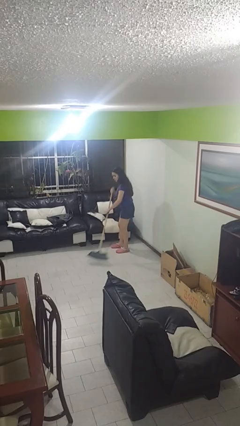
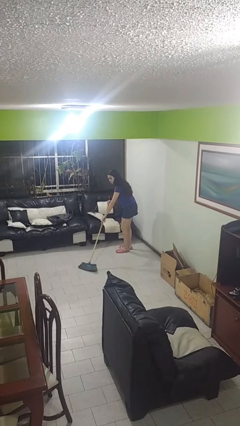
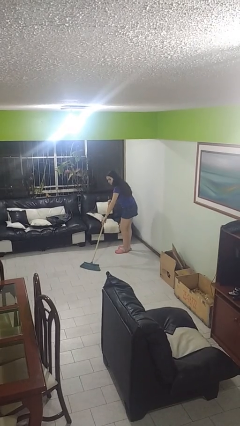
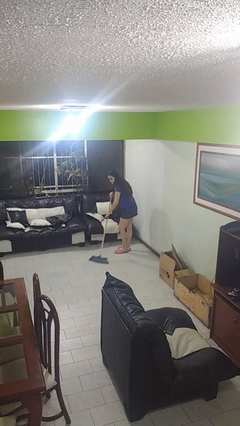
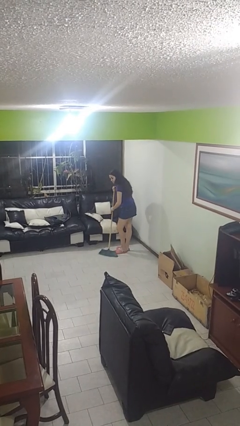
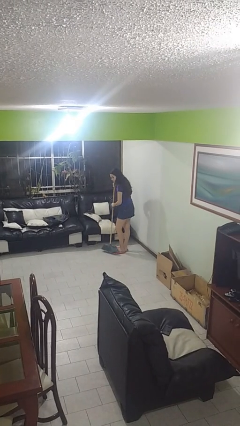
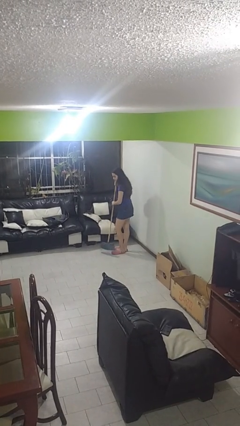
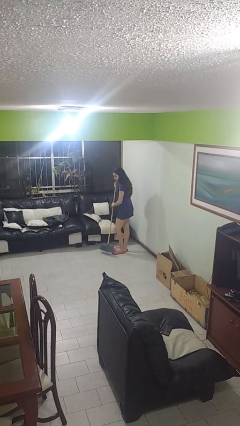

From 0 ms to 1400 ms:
person sweeps floor

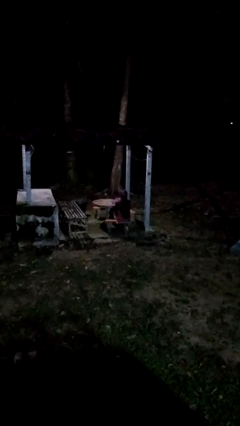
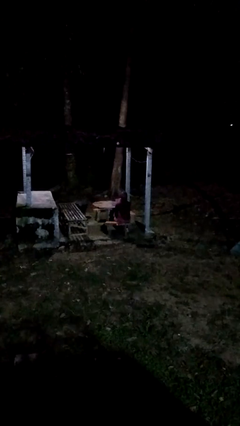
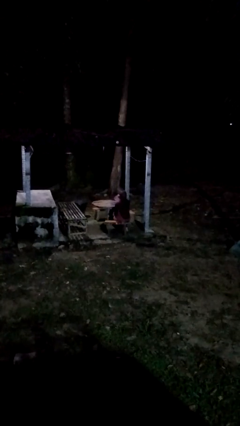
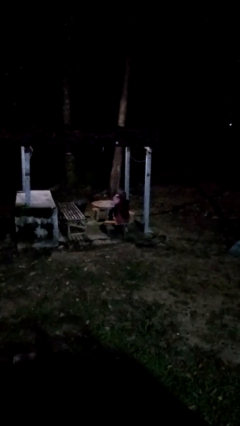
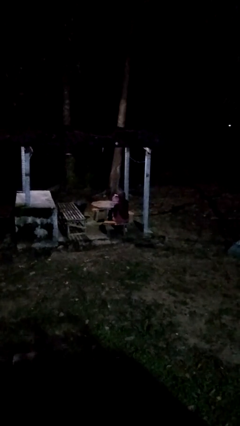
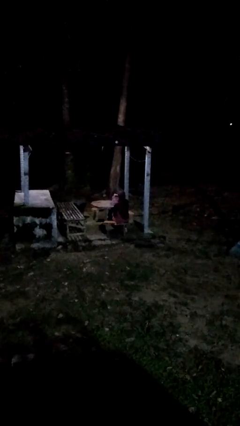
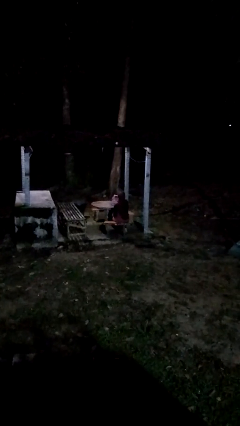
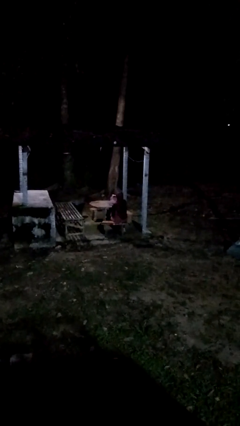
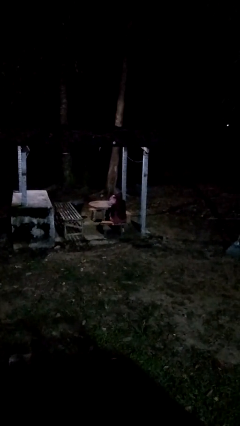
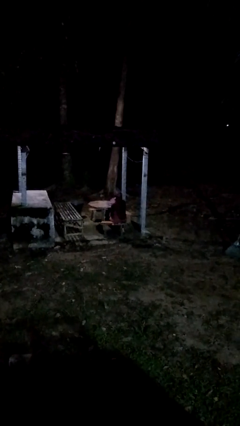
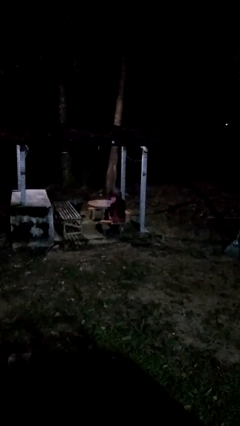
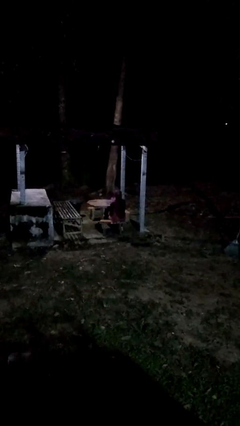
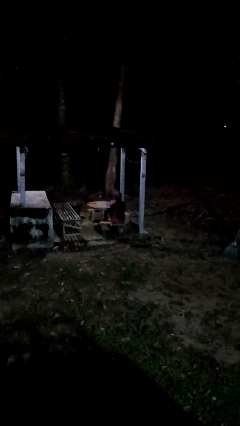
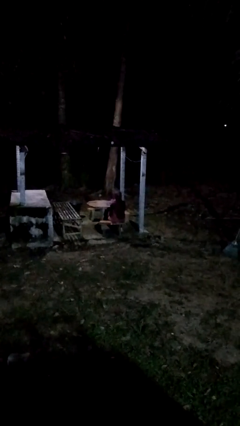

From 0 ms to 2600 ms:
person pours coffee into mug

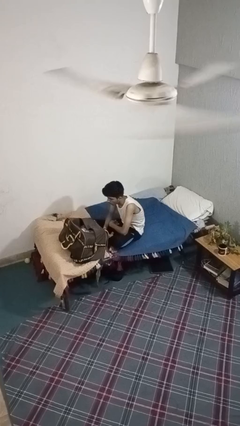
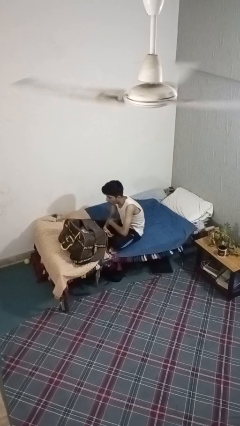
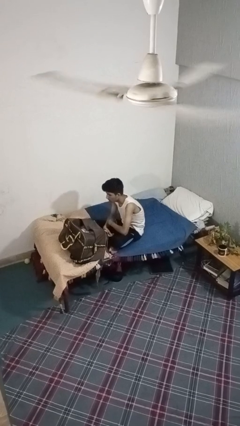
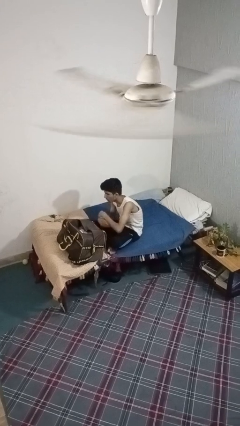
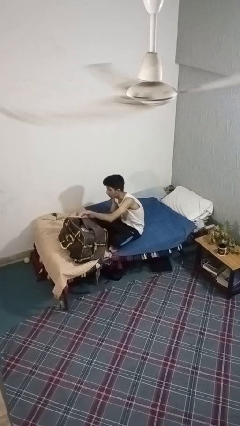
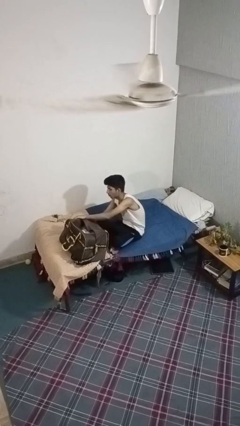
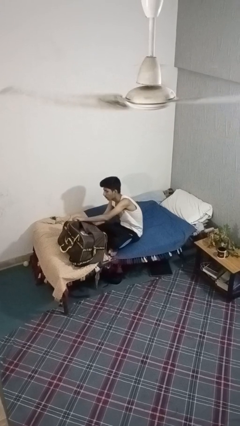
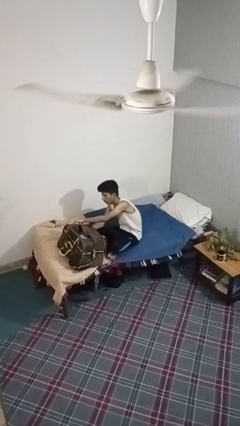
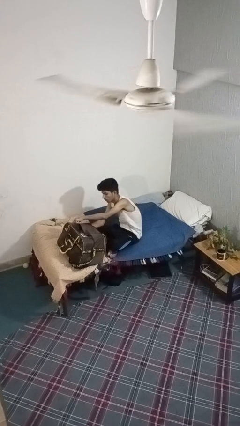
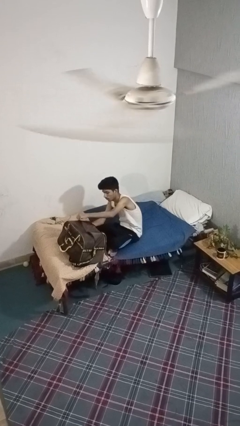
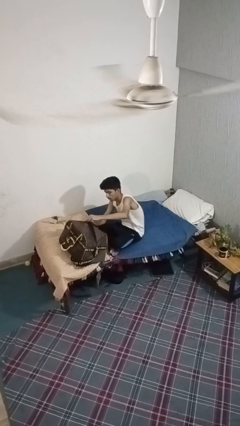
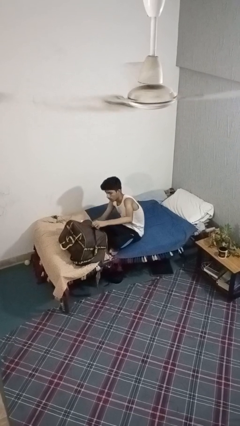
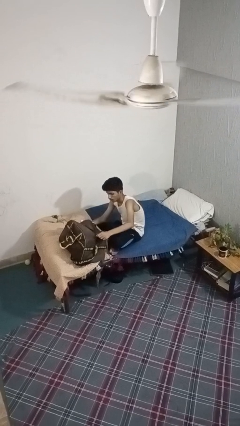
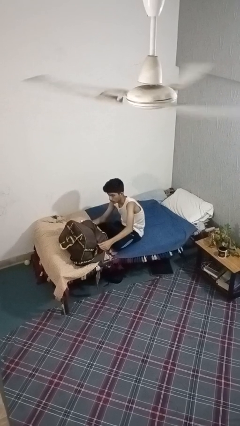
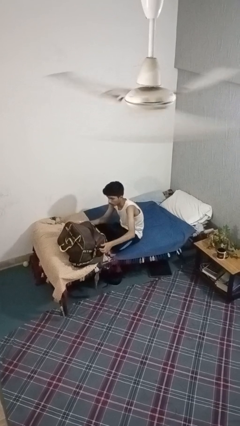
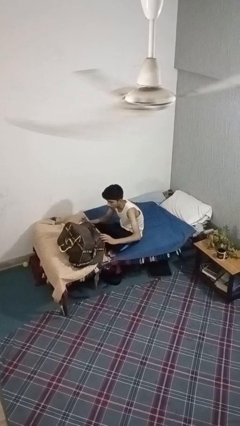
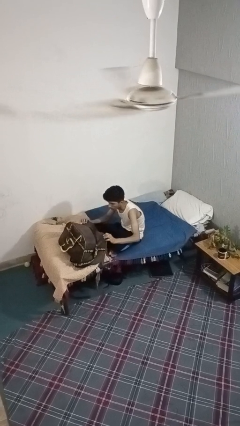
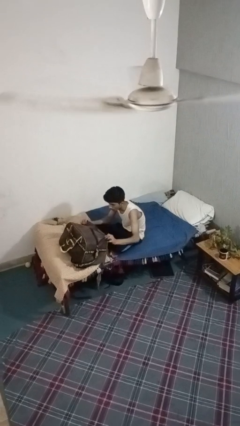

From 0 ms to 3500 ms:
person closes suitcase

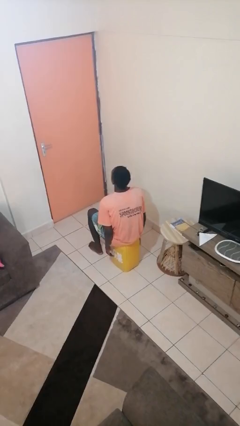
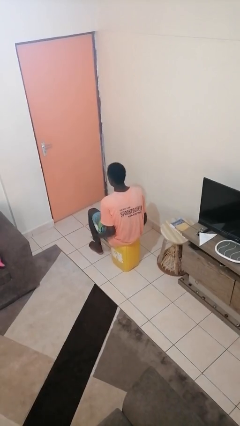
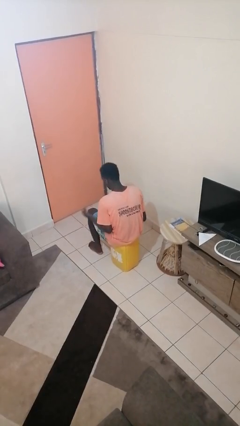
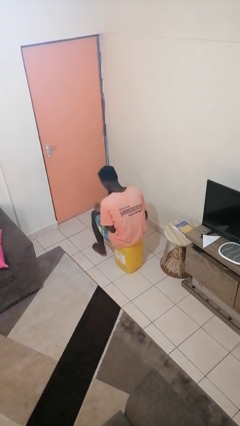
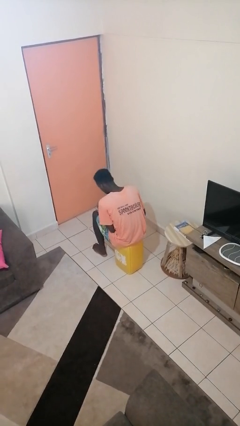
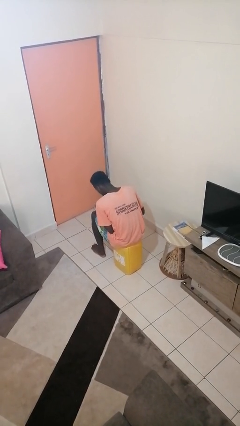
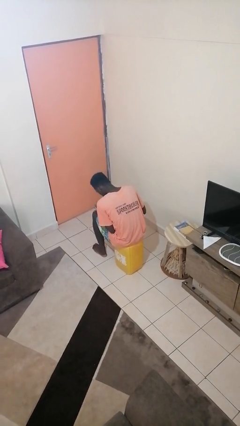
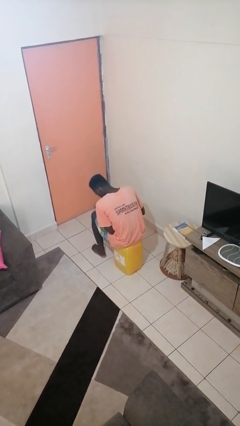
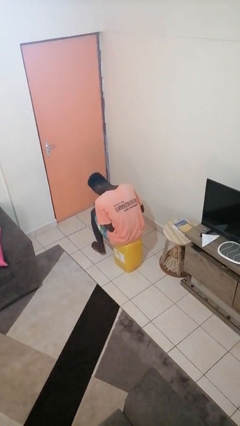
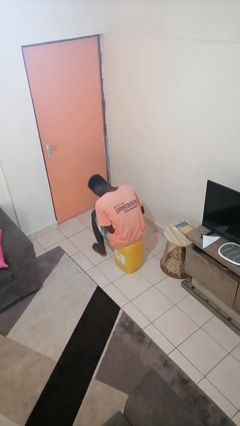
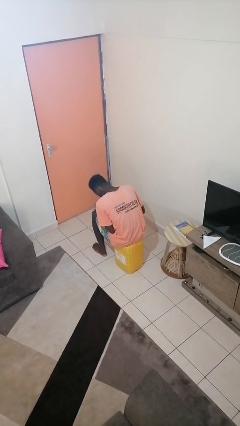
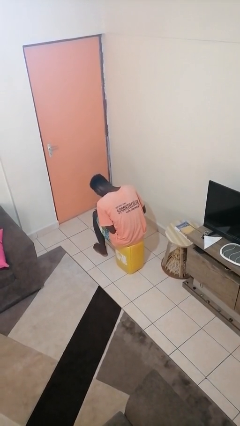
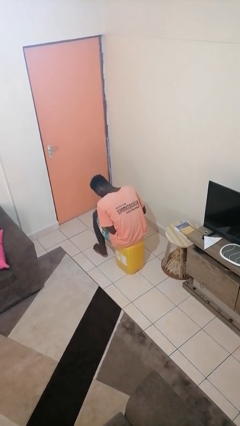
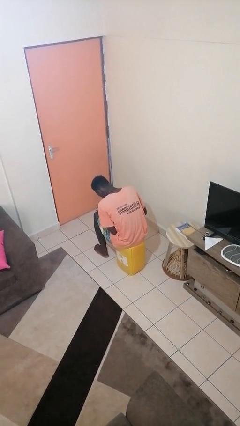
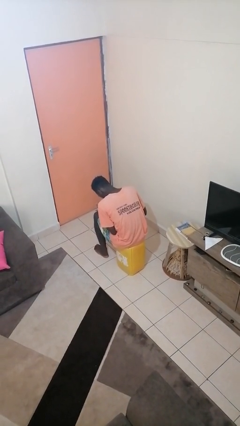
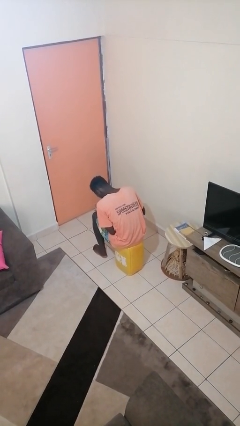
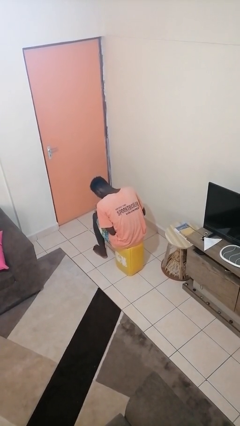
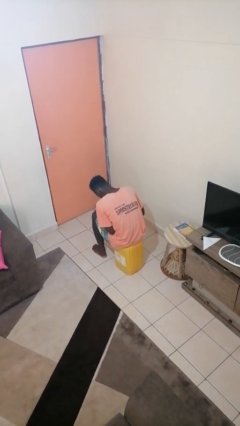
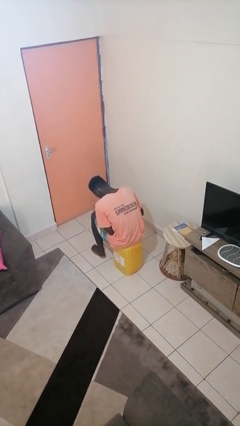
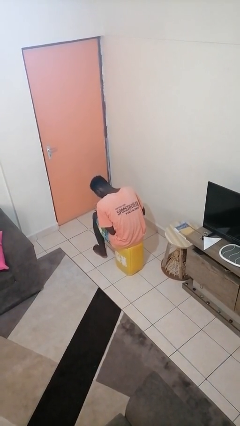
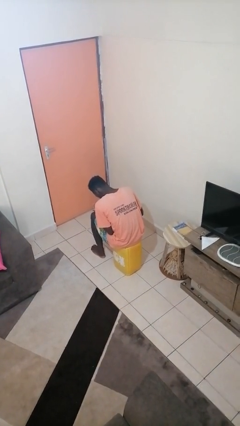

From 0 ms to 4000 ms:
person looks at hands in lap

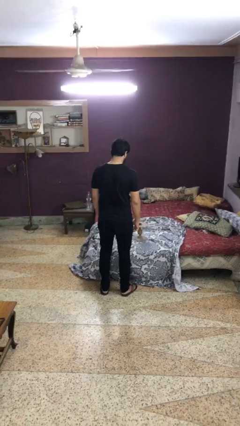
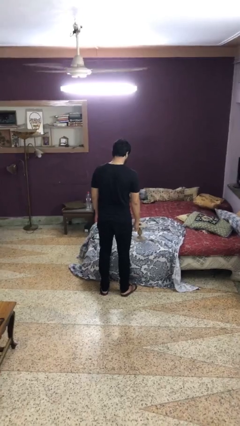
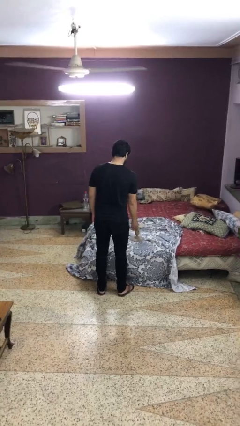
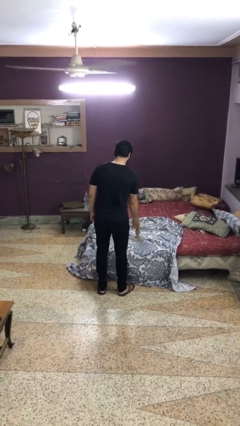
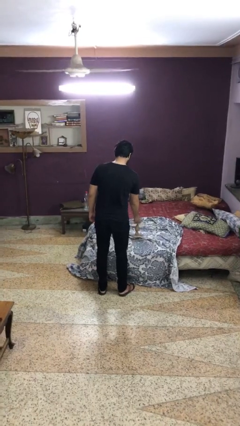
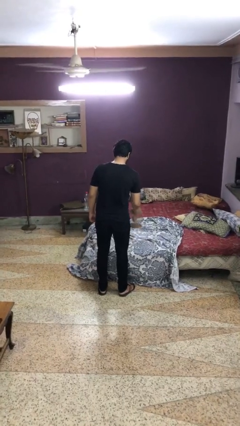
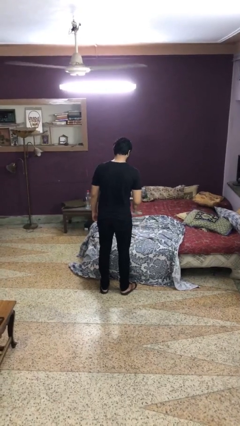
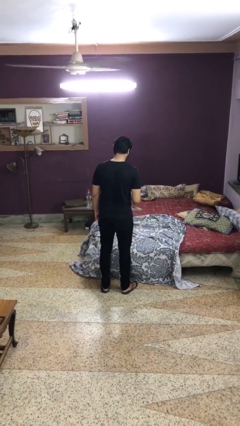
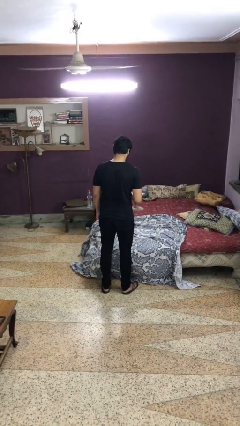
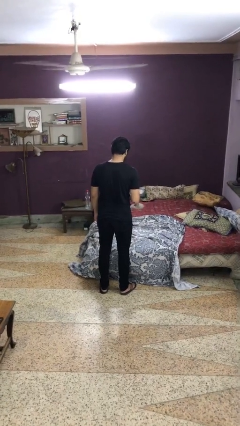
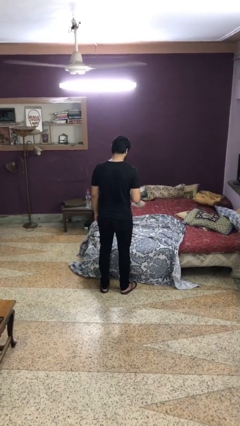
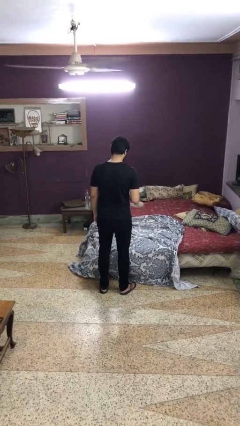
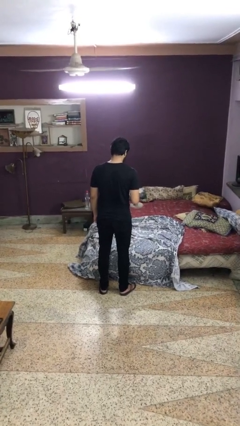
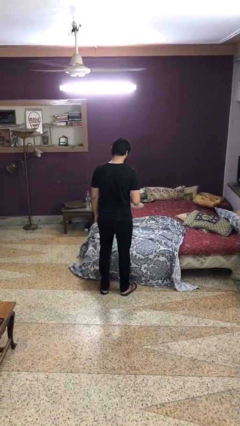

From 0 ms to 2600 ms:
person picks up object from bed

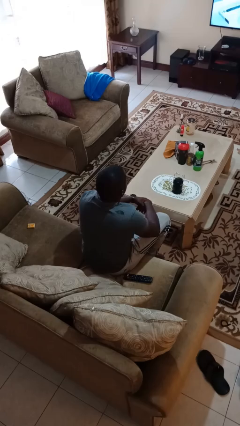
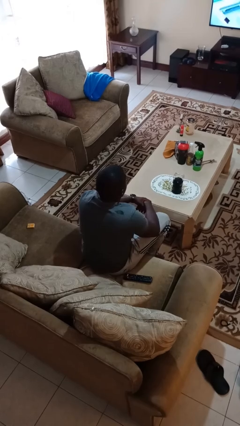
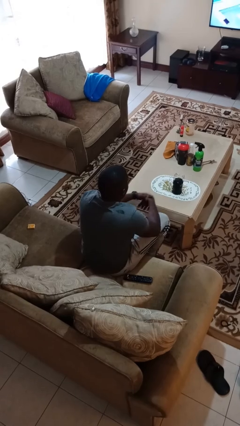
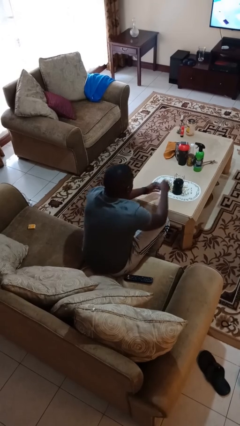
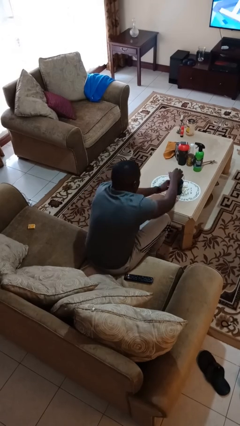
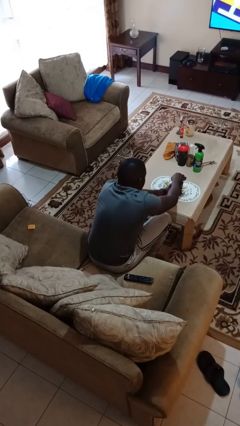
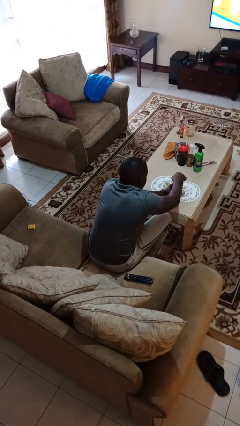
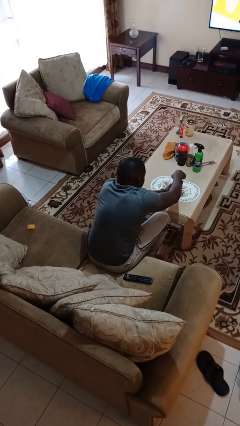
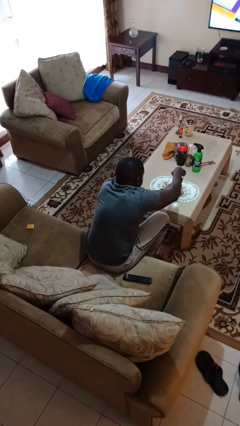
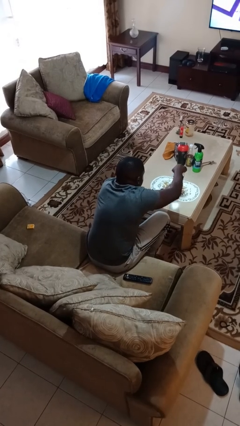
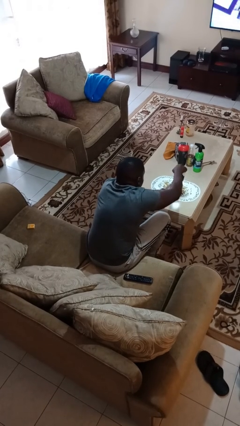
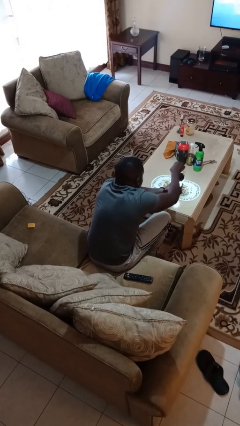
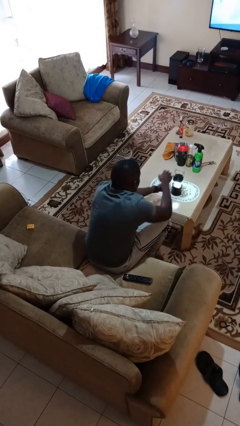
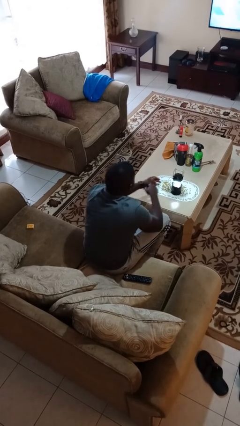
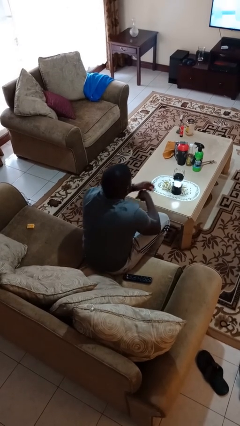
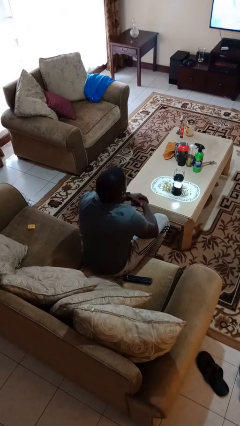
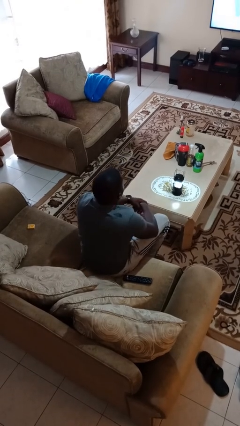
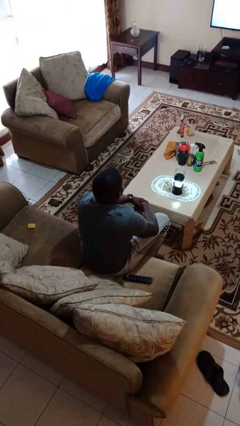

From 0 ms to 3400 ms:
person turns on lamp
